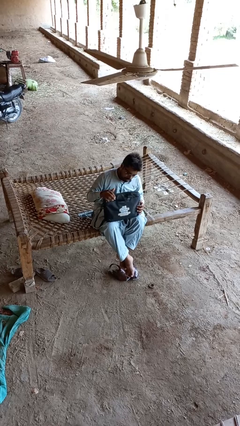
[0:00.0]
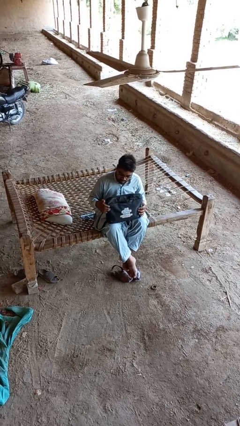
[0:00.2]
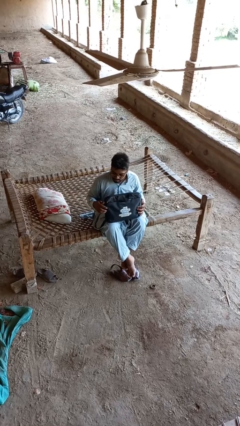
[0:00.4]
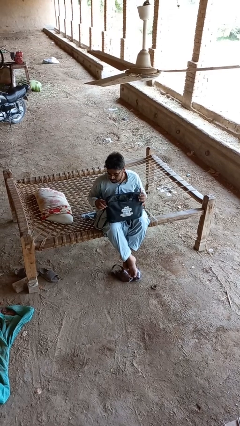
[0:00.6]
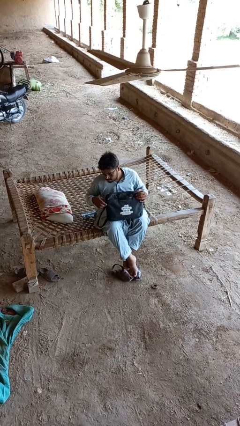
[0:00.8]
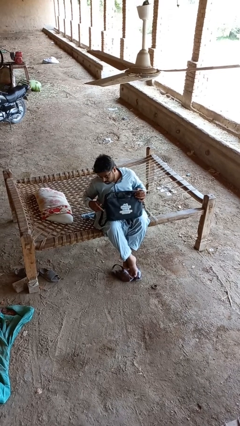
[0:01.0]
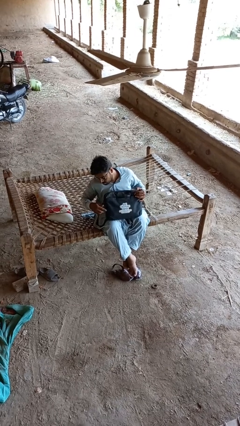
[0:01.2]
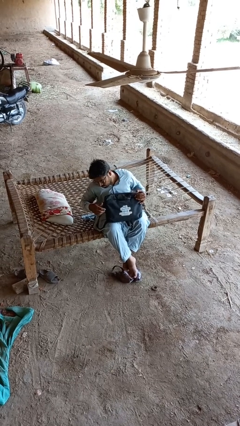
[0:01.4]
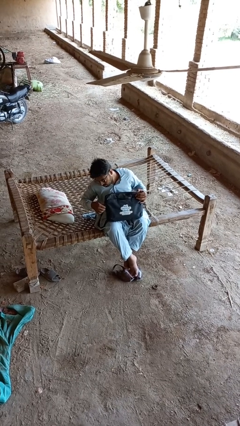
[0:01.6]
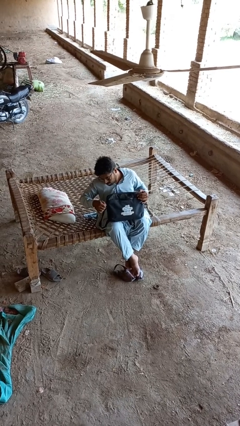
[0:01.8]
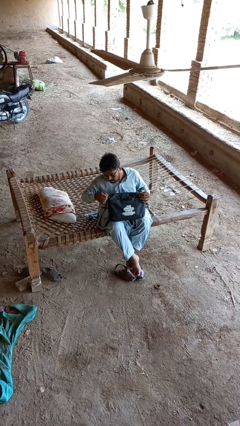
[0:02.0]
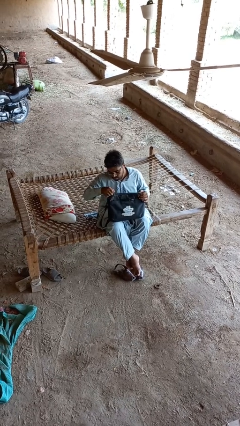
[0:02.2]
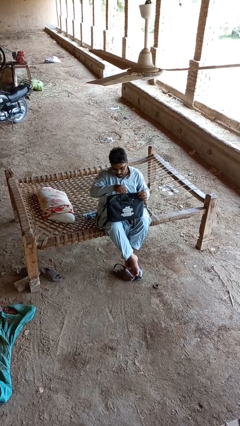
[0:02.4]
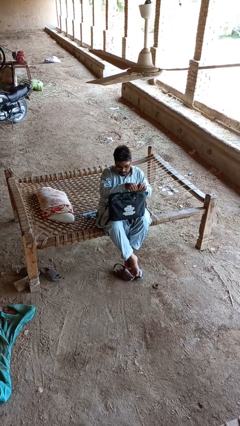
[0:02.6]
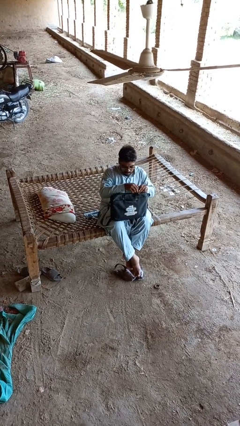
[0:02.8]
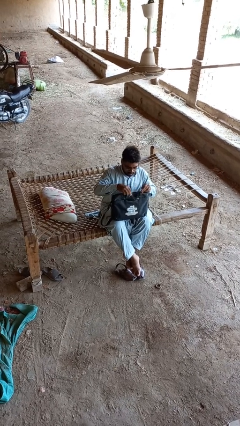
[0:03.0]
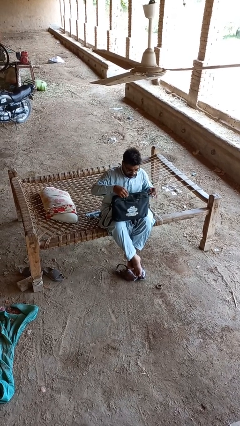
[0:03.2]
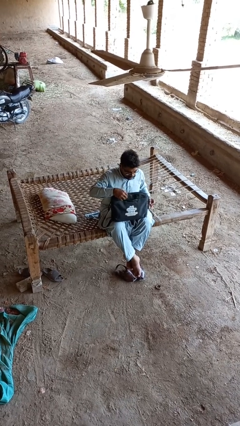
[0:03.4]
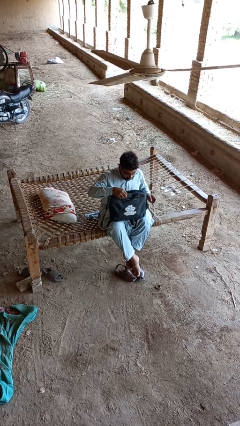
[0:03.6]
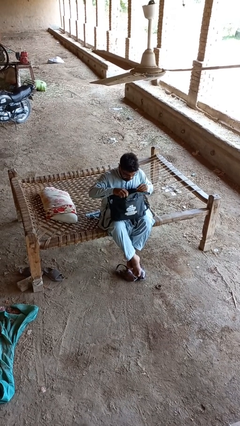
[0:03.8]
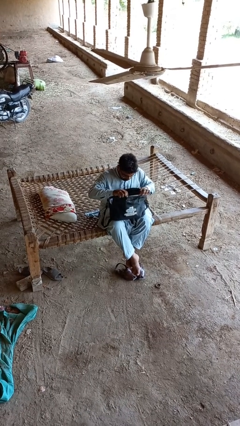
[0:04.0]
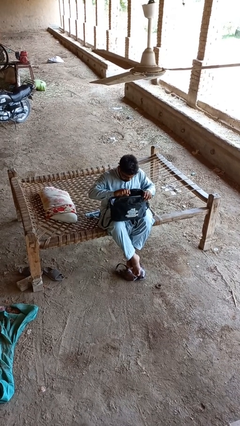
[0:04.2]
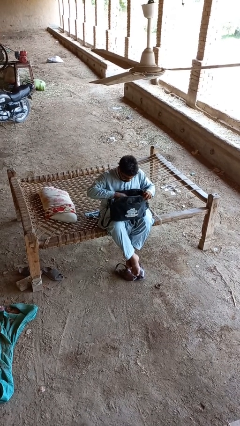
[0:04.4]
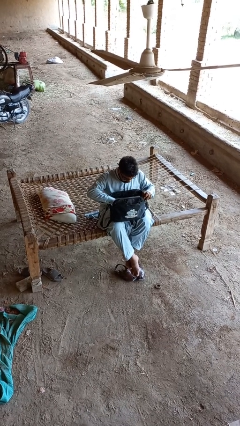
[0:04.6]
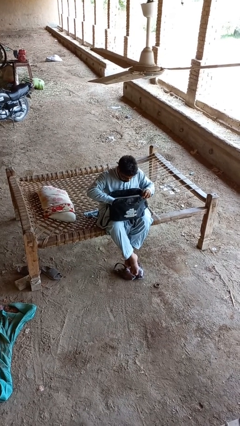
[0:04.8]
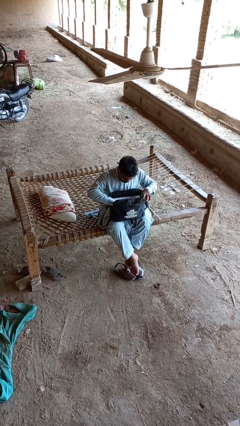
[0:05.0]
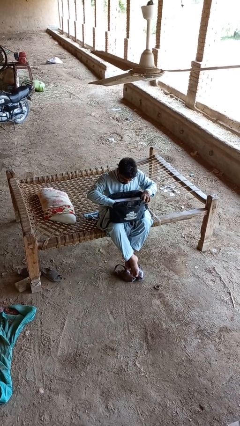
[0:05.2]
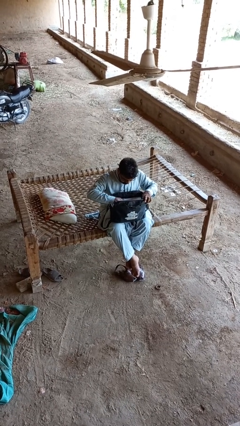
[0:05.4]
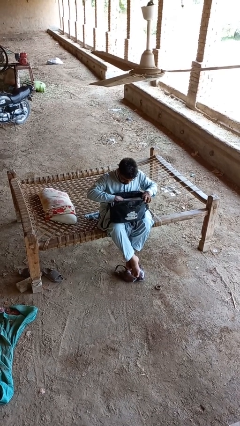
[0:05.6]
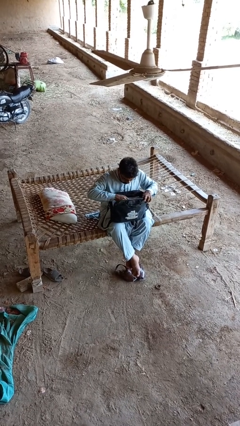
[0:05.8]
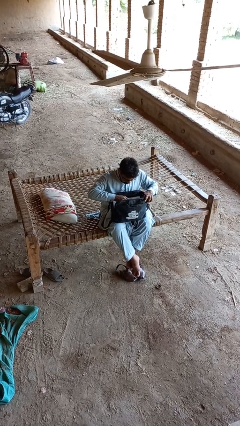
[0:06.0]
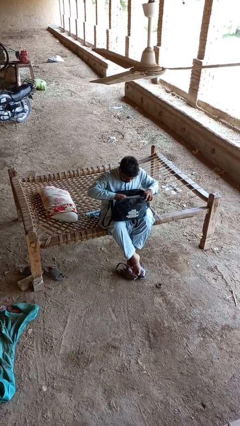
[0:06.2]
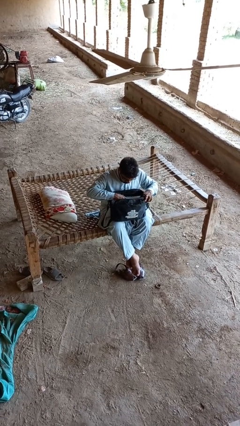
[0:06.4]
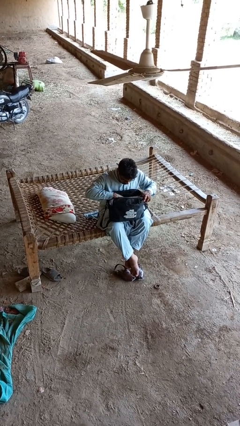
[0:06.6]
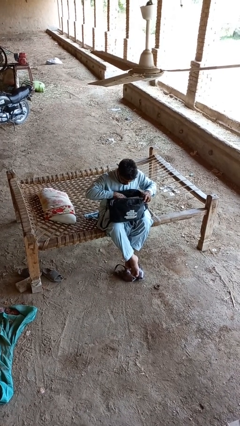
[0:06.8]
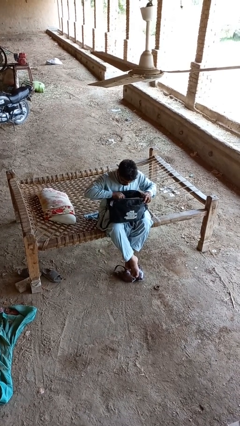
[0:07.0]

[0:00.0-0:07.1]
person searches in backpack

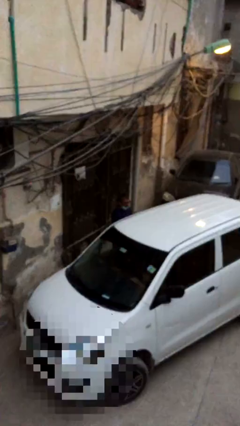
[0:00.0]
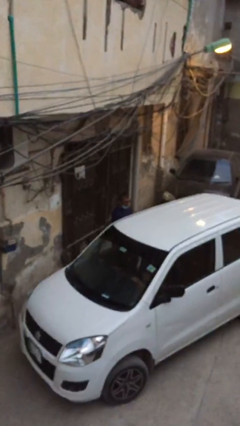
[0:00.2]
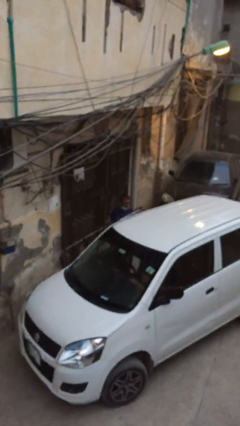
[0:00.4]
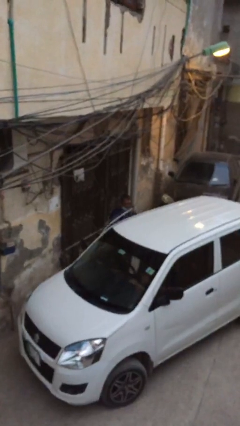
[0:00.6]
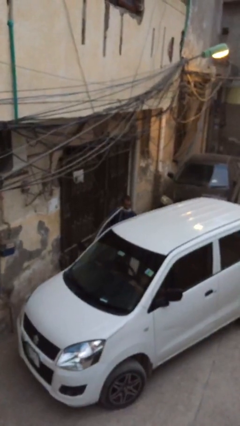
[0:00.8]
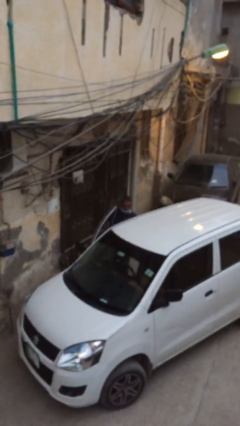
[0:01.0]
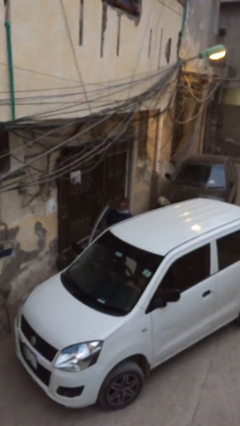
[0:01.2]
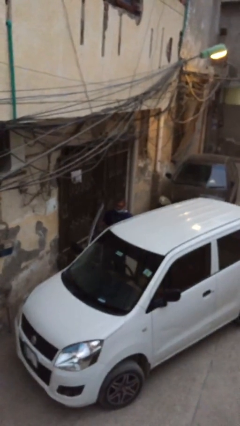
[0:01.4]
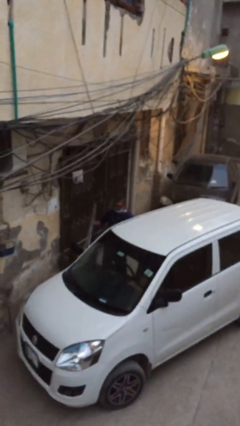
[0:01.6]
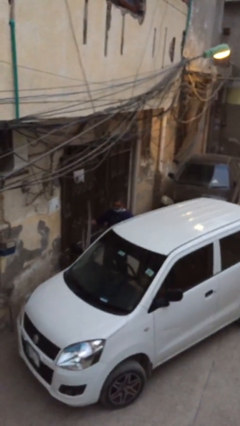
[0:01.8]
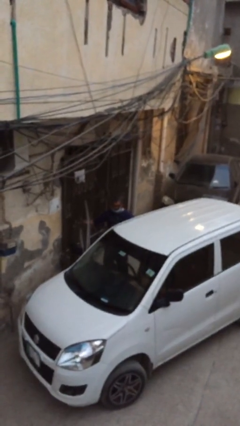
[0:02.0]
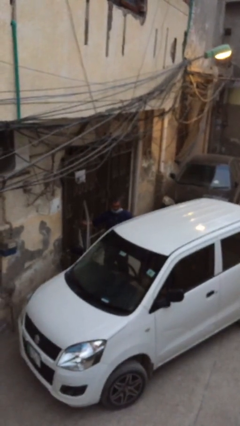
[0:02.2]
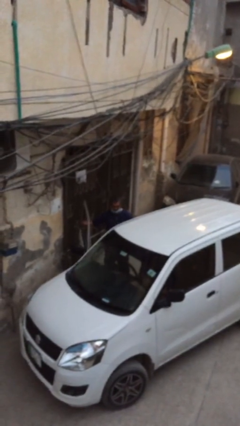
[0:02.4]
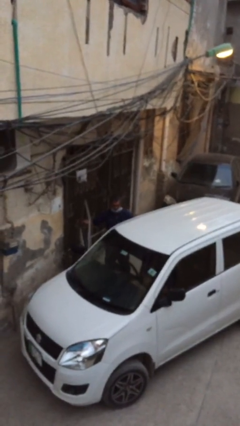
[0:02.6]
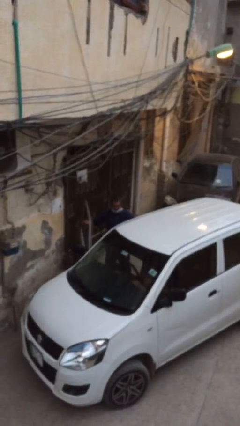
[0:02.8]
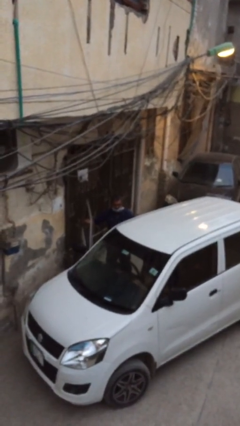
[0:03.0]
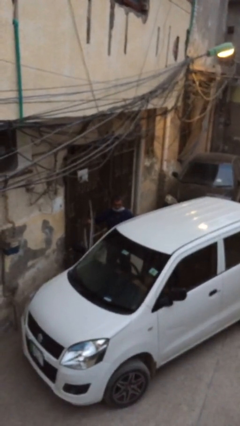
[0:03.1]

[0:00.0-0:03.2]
person opens car door

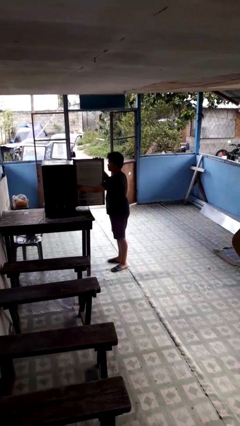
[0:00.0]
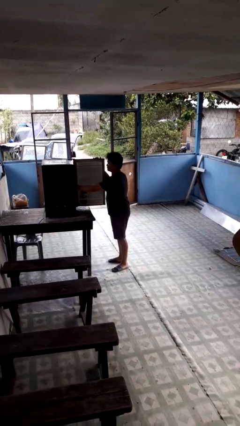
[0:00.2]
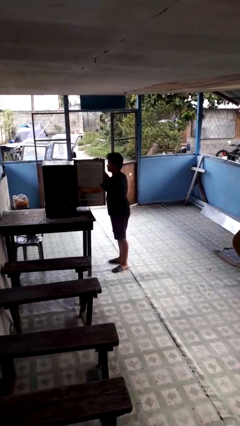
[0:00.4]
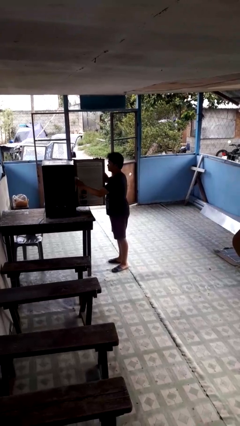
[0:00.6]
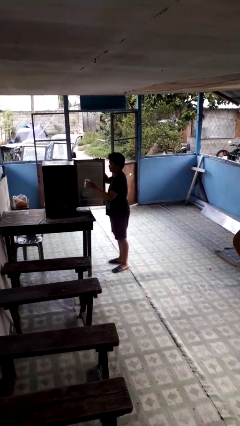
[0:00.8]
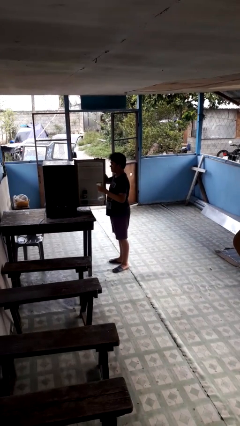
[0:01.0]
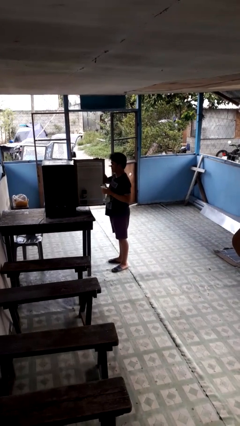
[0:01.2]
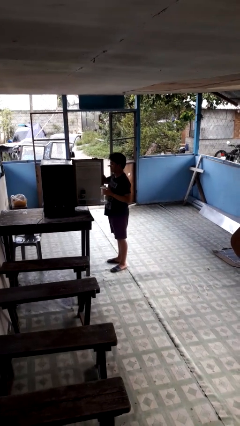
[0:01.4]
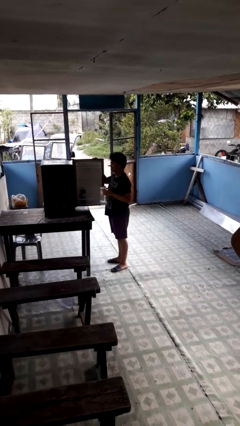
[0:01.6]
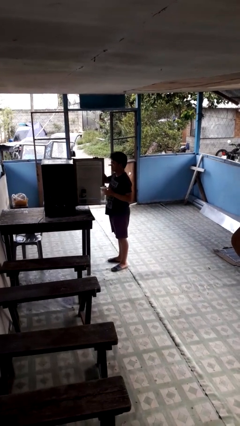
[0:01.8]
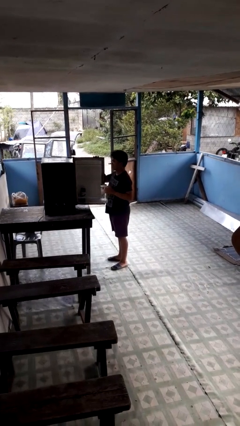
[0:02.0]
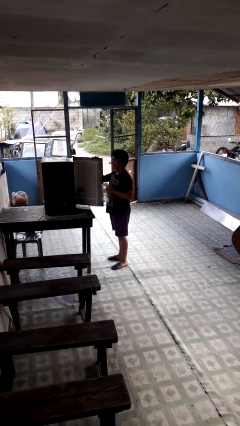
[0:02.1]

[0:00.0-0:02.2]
person takes object from refrigerator

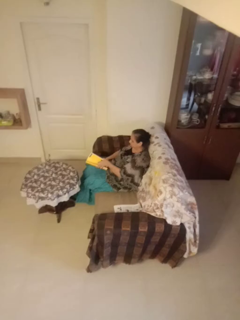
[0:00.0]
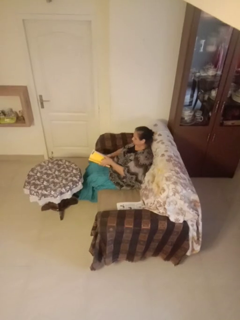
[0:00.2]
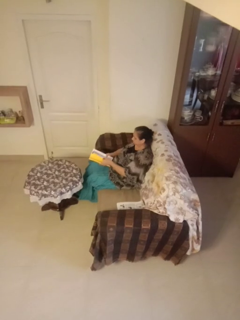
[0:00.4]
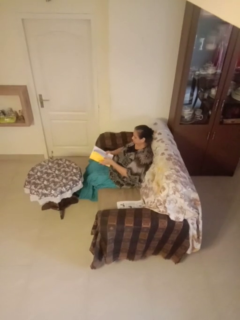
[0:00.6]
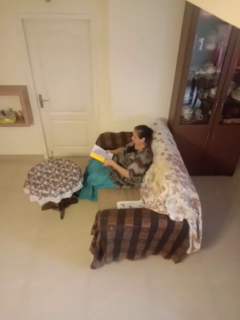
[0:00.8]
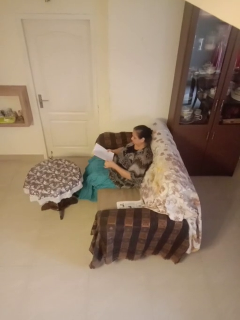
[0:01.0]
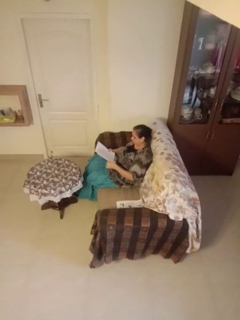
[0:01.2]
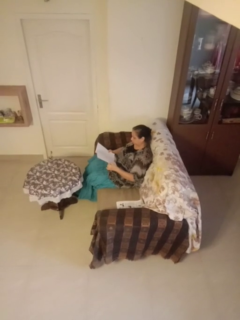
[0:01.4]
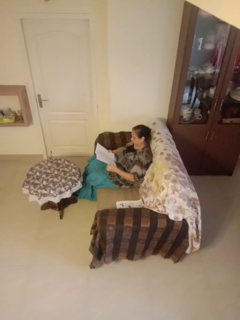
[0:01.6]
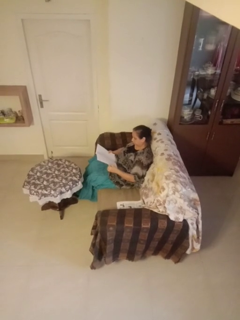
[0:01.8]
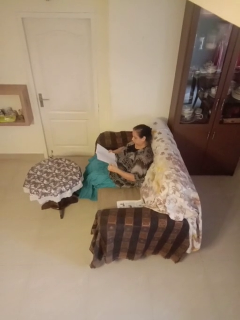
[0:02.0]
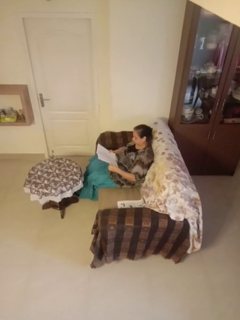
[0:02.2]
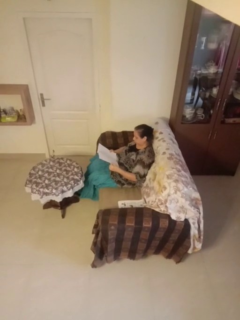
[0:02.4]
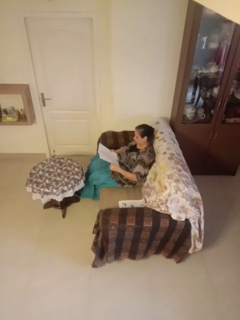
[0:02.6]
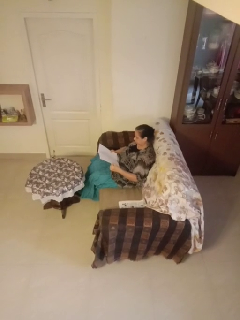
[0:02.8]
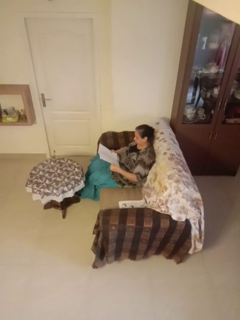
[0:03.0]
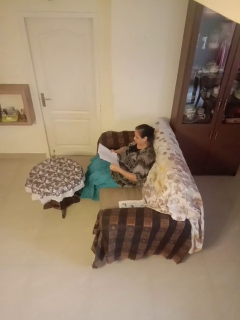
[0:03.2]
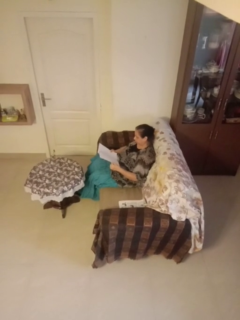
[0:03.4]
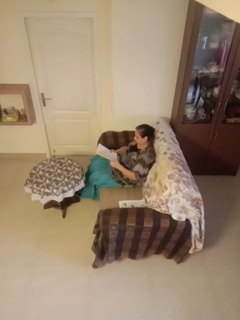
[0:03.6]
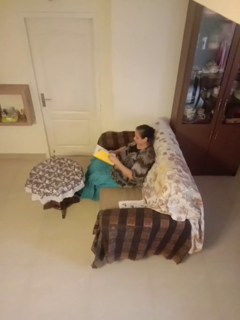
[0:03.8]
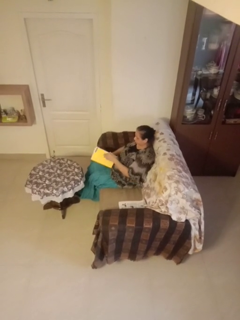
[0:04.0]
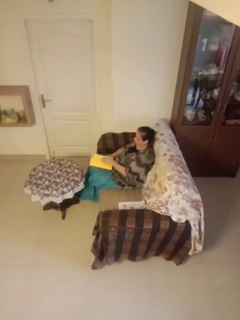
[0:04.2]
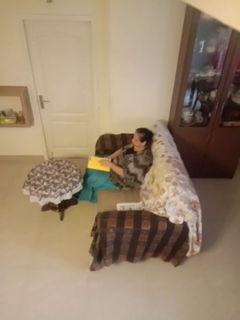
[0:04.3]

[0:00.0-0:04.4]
person reads magazine

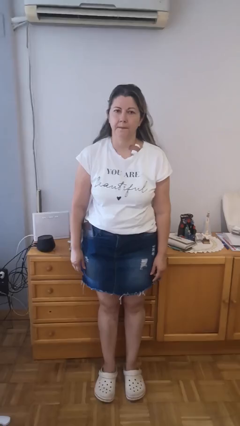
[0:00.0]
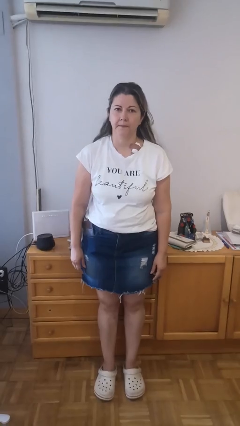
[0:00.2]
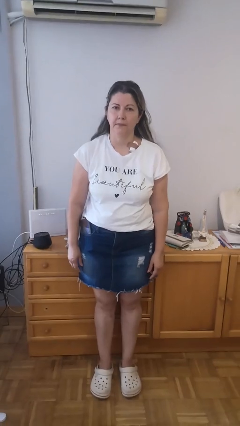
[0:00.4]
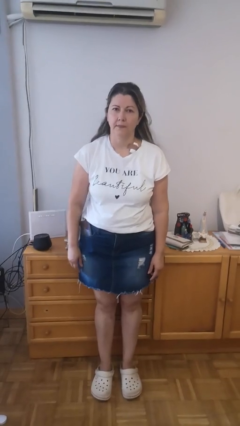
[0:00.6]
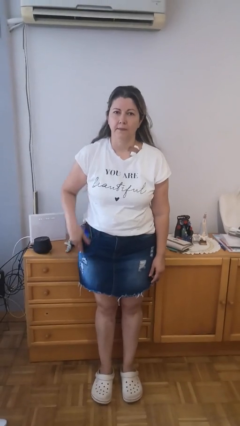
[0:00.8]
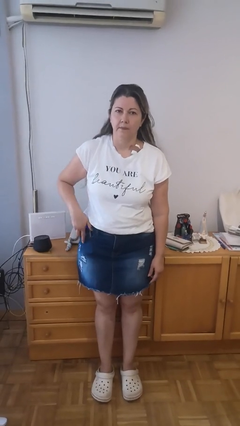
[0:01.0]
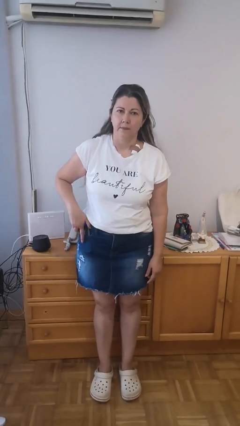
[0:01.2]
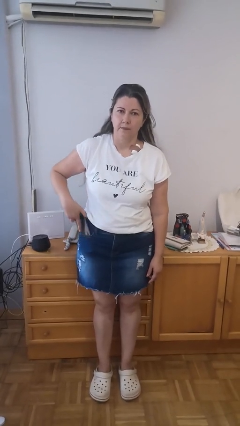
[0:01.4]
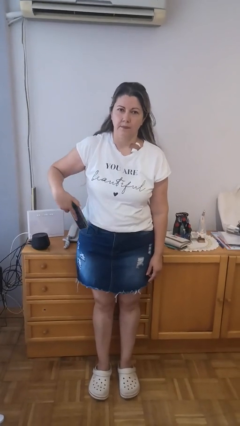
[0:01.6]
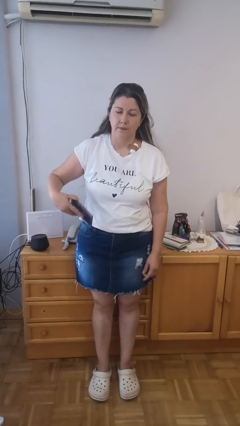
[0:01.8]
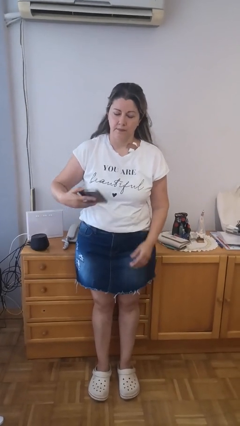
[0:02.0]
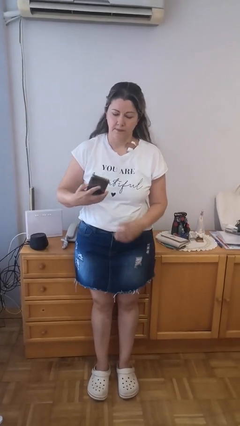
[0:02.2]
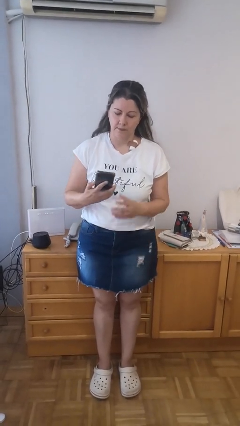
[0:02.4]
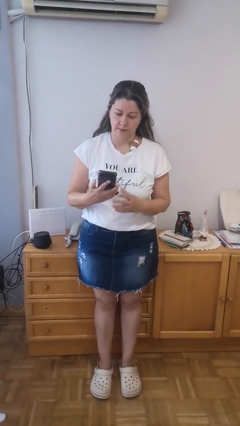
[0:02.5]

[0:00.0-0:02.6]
person takes phone from pocket
